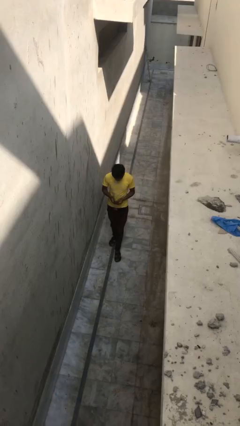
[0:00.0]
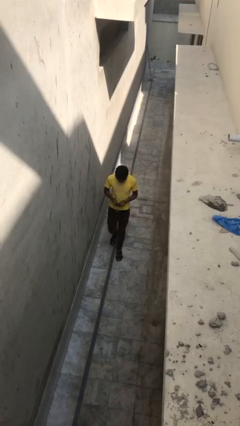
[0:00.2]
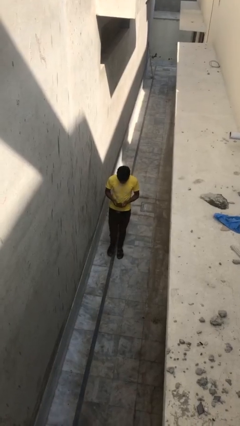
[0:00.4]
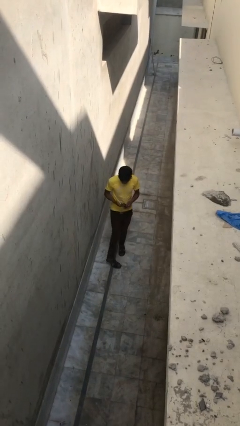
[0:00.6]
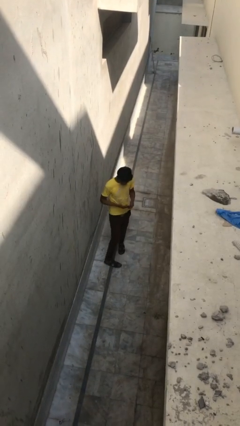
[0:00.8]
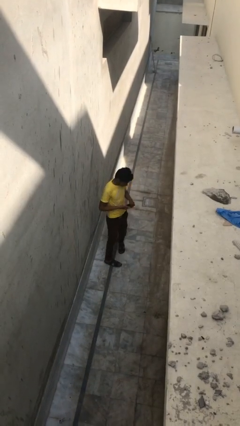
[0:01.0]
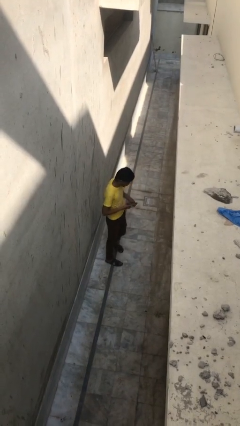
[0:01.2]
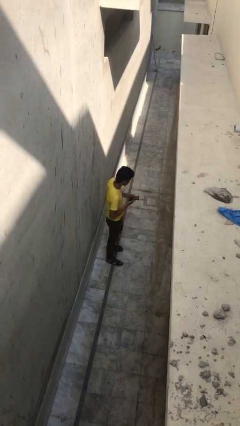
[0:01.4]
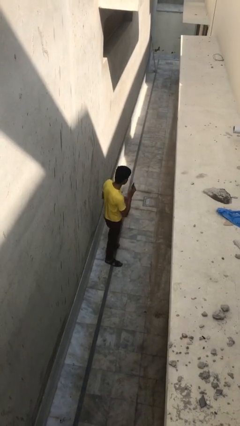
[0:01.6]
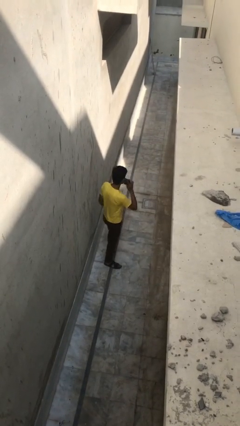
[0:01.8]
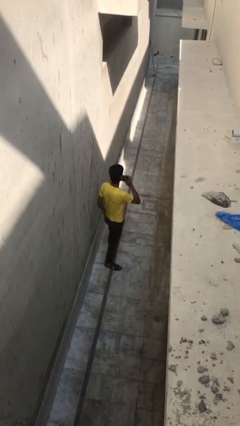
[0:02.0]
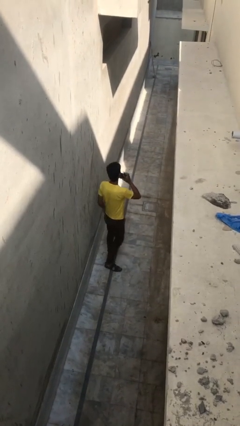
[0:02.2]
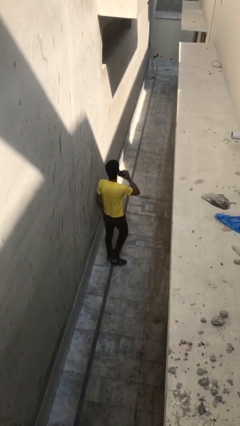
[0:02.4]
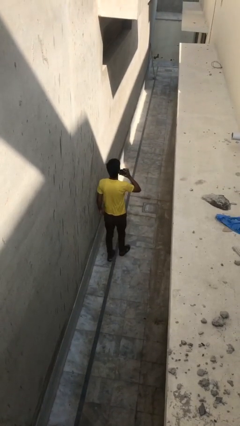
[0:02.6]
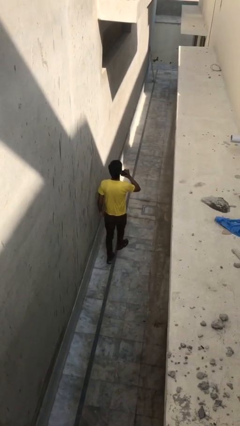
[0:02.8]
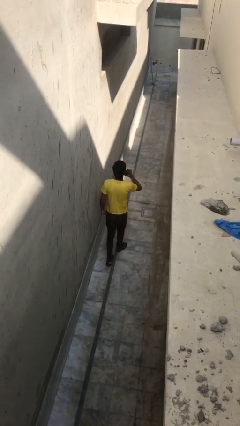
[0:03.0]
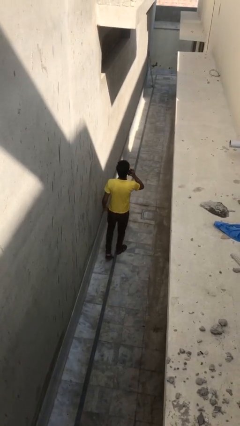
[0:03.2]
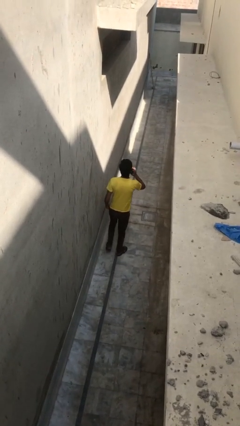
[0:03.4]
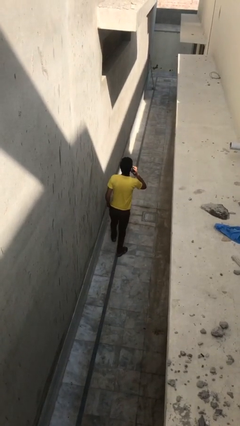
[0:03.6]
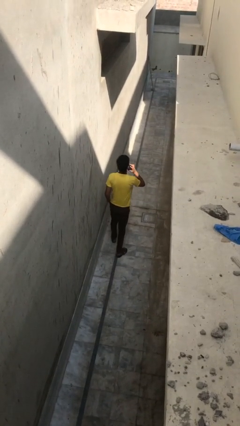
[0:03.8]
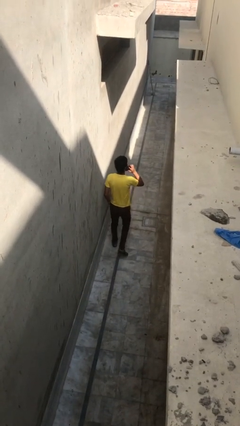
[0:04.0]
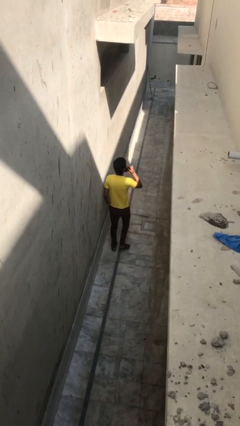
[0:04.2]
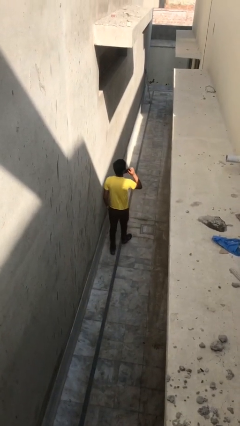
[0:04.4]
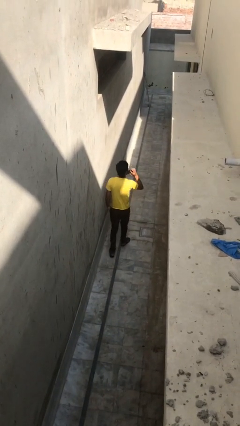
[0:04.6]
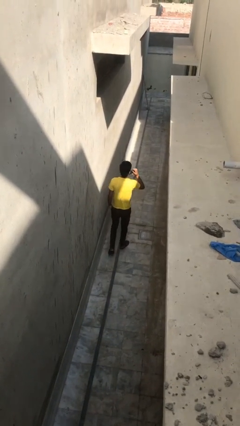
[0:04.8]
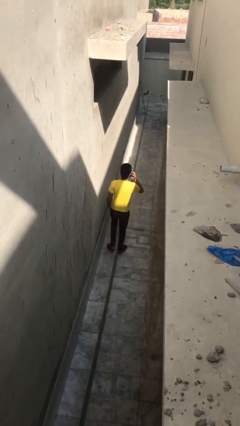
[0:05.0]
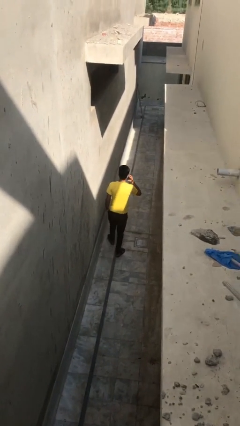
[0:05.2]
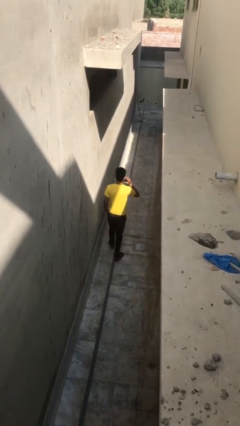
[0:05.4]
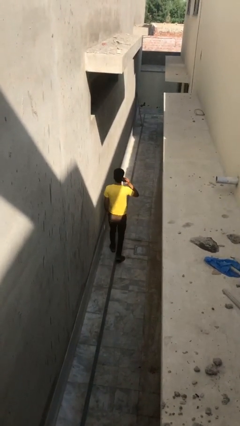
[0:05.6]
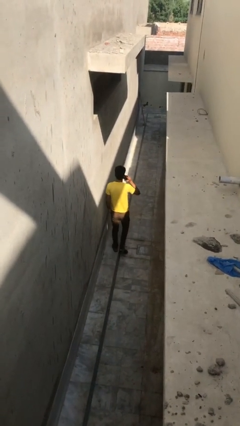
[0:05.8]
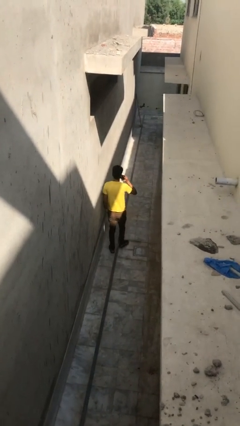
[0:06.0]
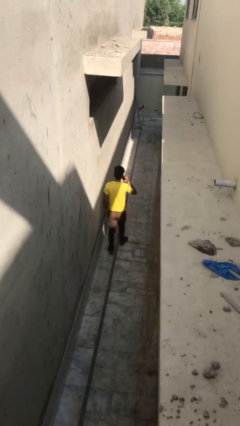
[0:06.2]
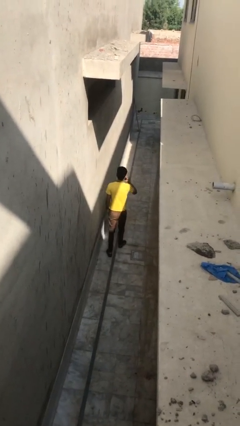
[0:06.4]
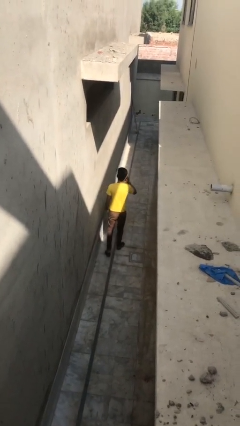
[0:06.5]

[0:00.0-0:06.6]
person talks on phone

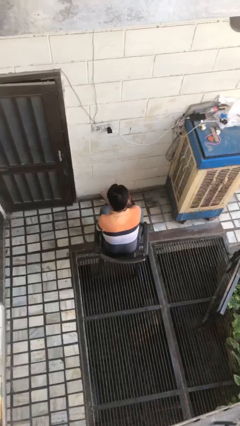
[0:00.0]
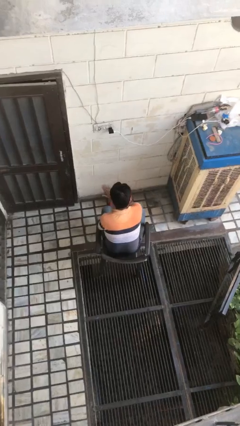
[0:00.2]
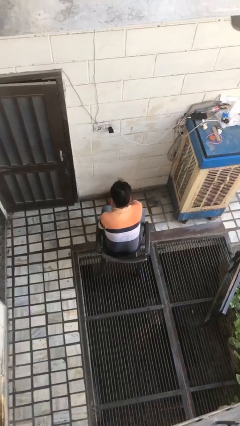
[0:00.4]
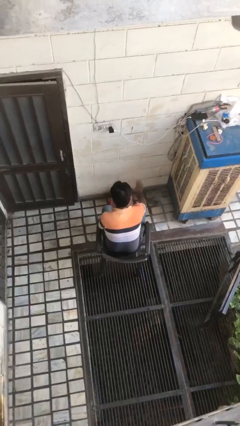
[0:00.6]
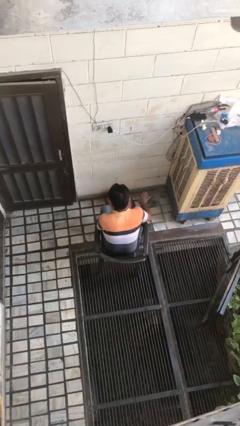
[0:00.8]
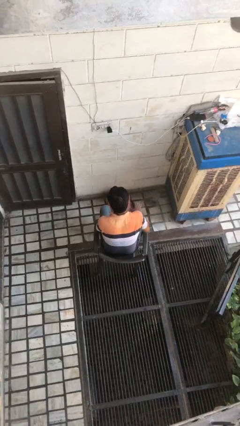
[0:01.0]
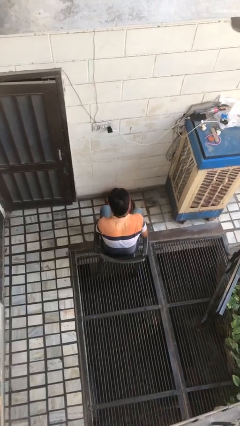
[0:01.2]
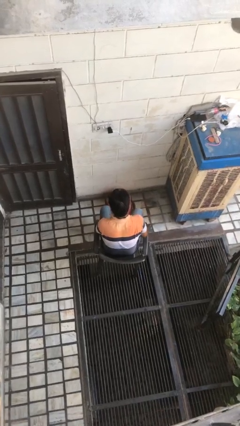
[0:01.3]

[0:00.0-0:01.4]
person waves hand over object

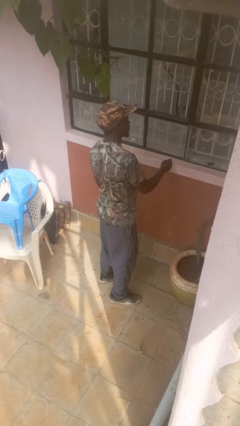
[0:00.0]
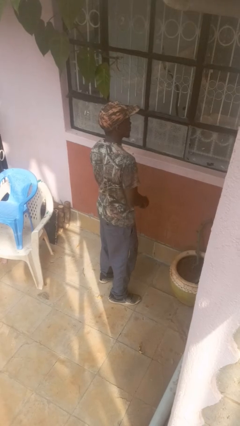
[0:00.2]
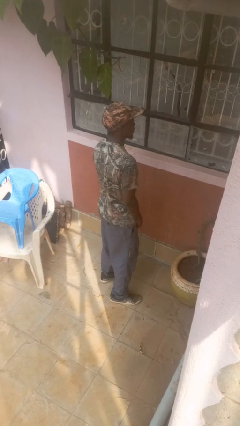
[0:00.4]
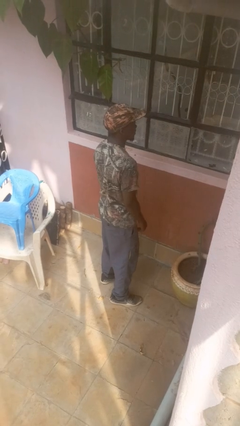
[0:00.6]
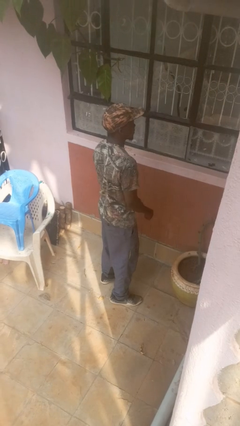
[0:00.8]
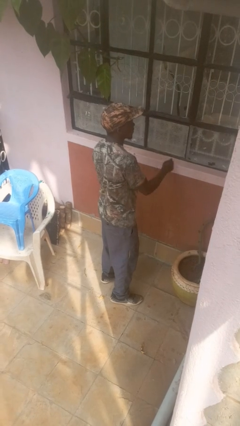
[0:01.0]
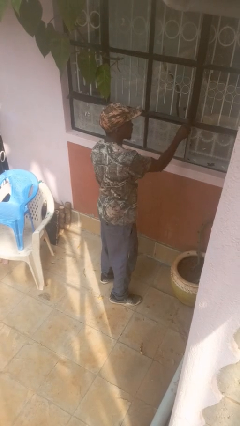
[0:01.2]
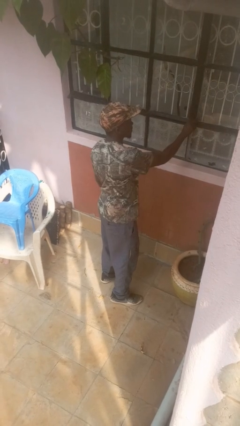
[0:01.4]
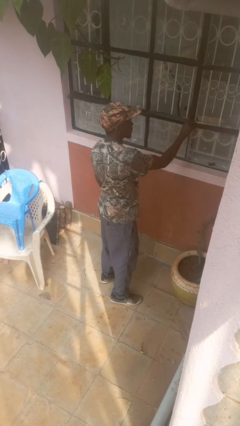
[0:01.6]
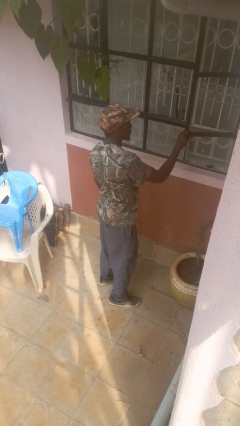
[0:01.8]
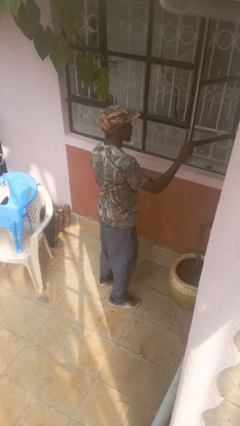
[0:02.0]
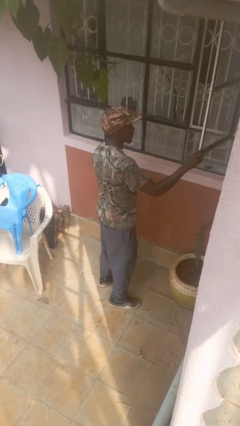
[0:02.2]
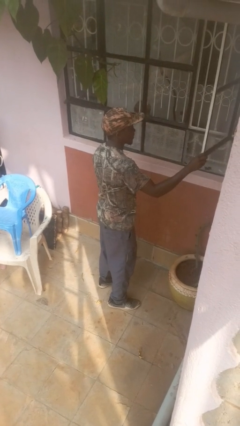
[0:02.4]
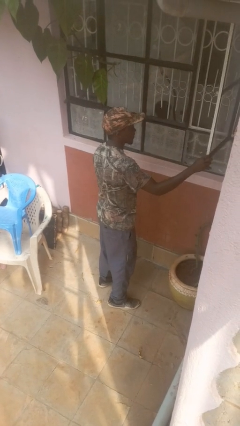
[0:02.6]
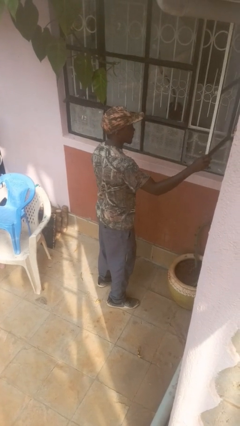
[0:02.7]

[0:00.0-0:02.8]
person opens home window

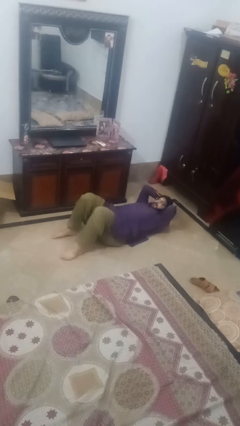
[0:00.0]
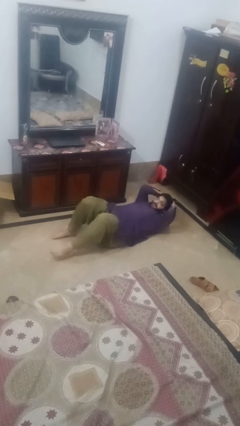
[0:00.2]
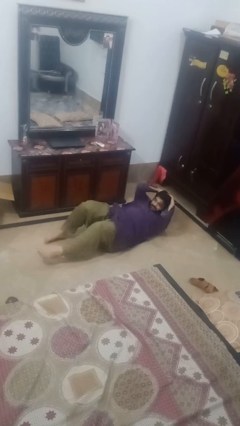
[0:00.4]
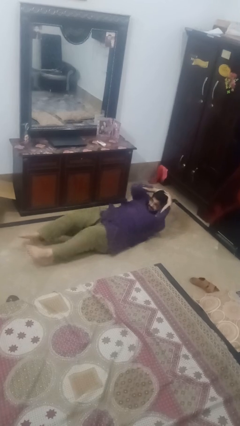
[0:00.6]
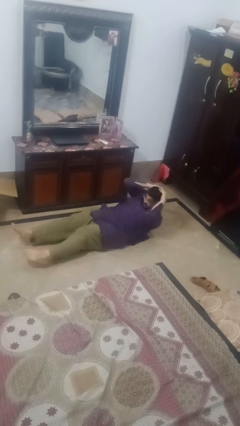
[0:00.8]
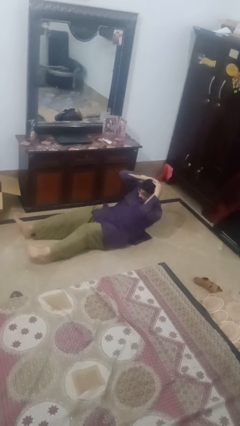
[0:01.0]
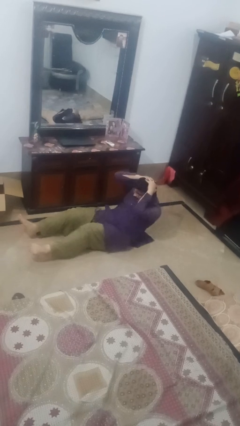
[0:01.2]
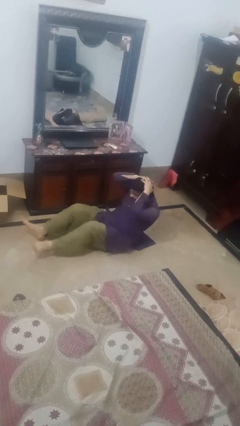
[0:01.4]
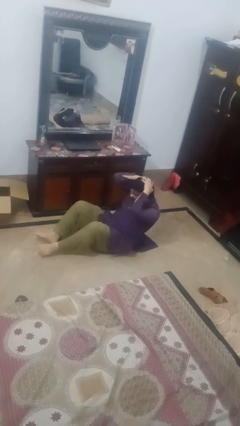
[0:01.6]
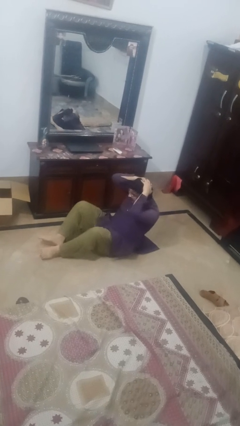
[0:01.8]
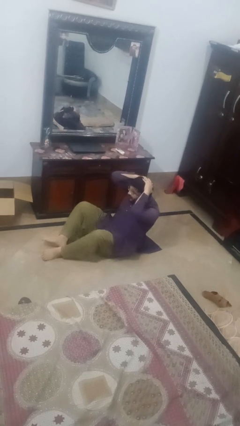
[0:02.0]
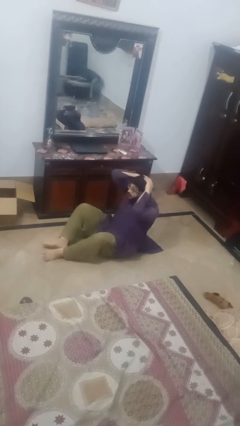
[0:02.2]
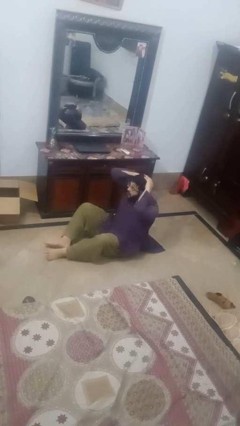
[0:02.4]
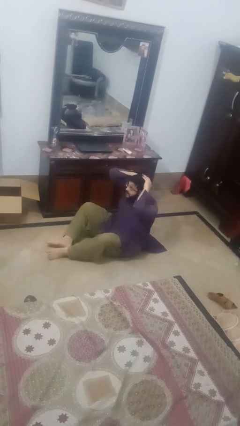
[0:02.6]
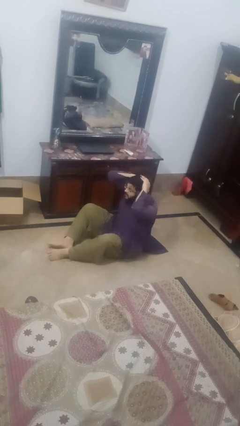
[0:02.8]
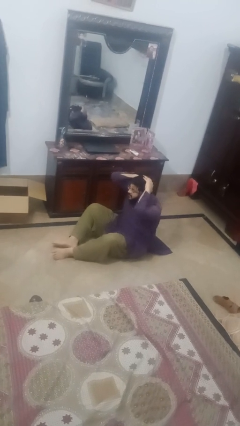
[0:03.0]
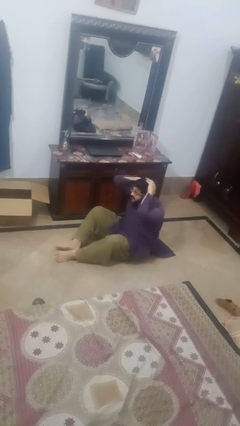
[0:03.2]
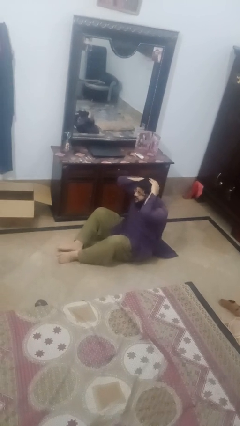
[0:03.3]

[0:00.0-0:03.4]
person exercises with situp

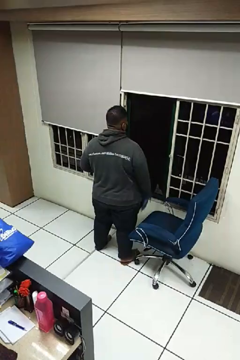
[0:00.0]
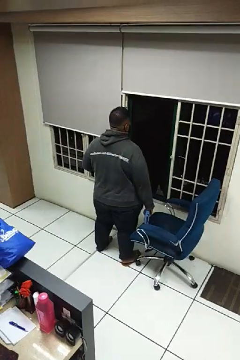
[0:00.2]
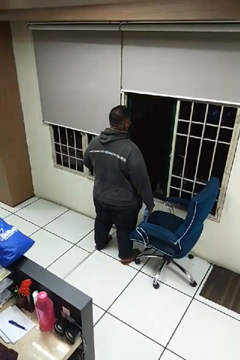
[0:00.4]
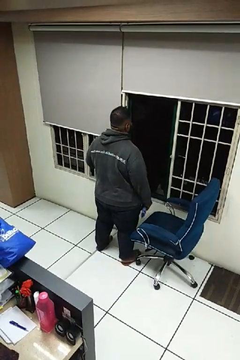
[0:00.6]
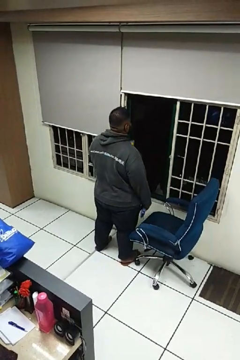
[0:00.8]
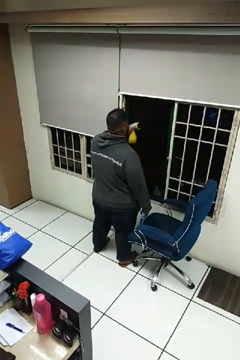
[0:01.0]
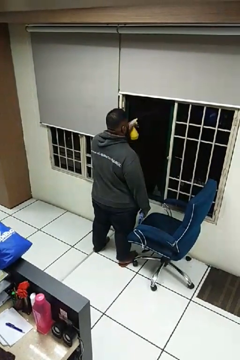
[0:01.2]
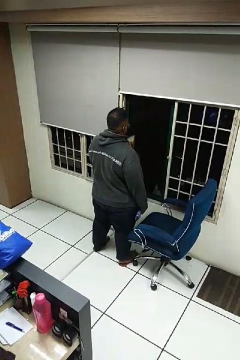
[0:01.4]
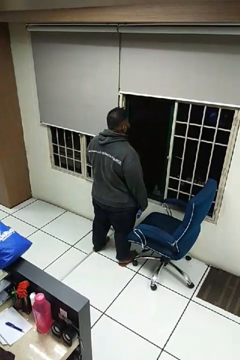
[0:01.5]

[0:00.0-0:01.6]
person sprays from bottle

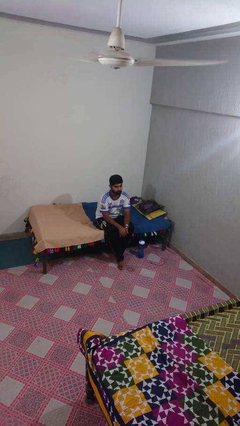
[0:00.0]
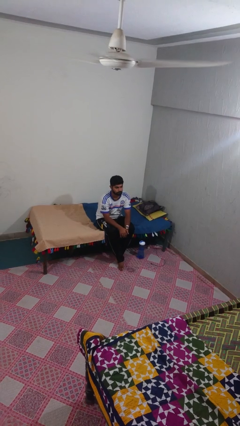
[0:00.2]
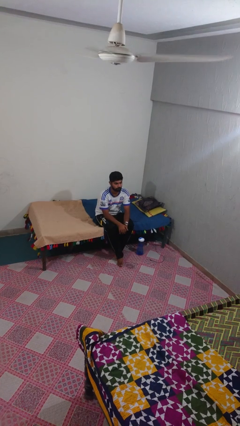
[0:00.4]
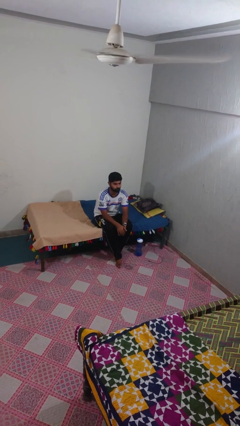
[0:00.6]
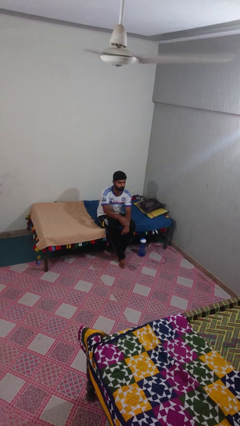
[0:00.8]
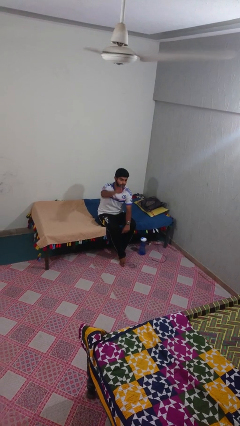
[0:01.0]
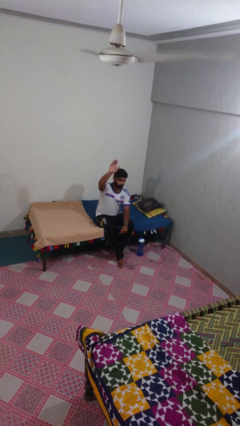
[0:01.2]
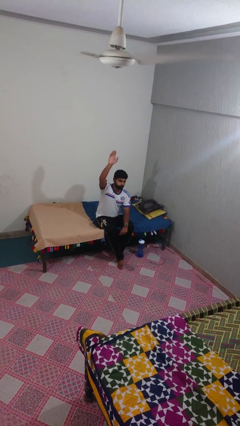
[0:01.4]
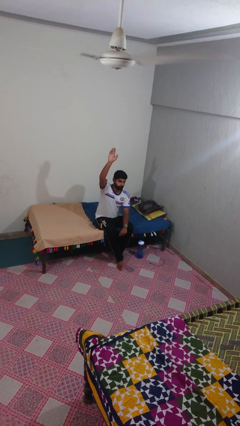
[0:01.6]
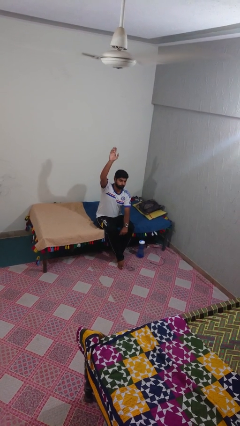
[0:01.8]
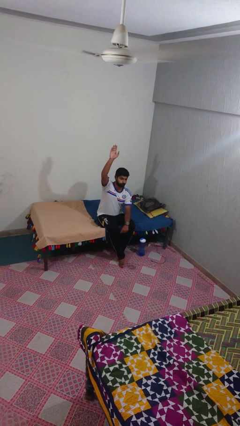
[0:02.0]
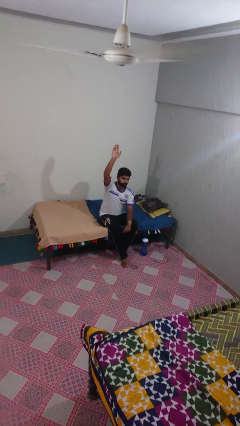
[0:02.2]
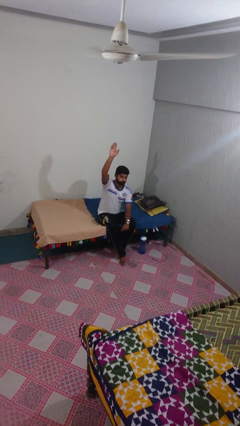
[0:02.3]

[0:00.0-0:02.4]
person gestures raise hand
